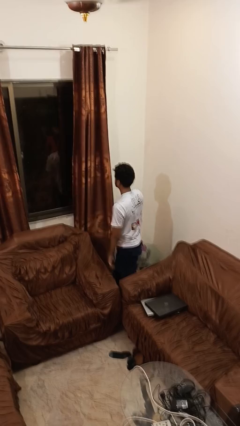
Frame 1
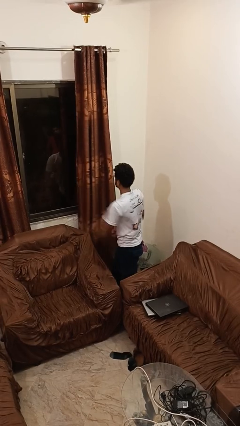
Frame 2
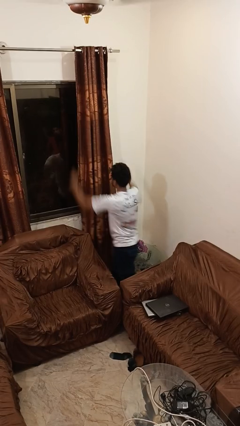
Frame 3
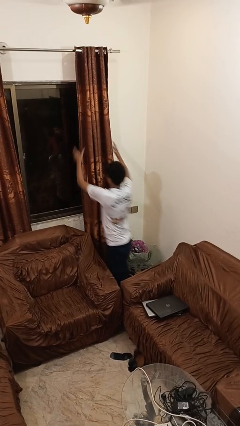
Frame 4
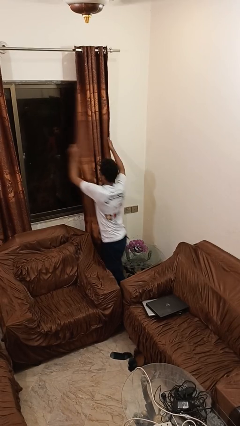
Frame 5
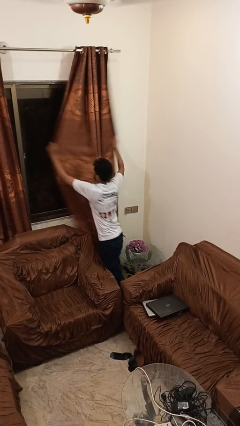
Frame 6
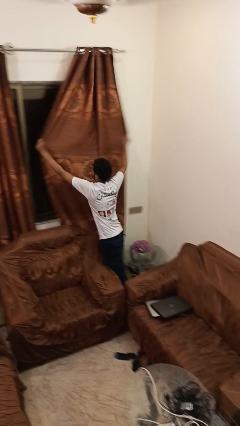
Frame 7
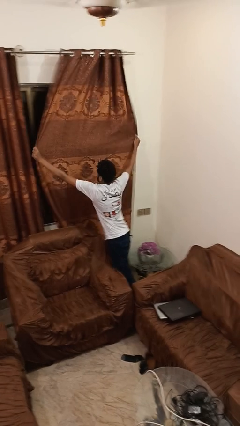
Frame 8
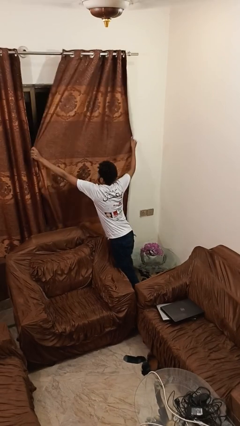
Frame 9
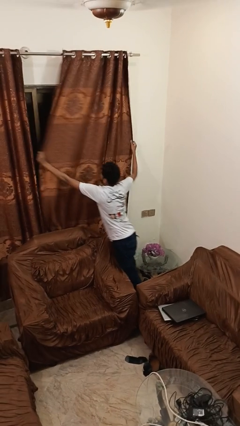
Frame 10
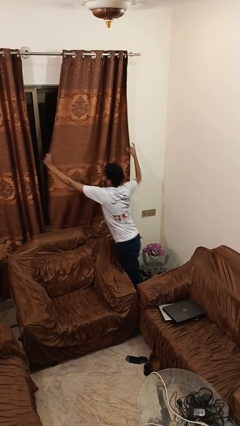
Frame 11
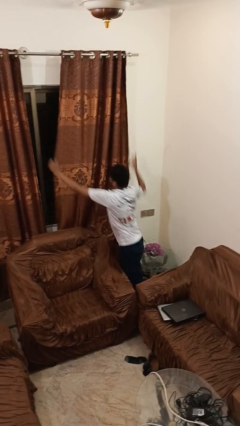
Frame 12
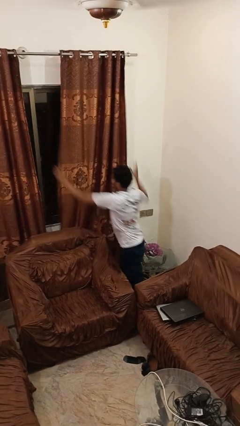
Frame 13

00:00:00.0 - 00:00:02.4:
person closes curtains

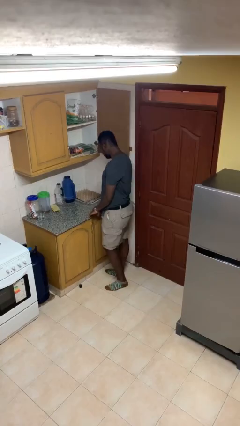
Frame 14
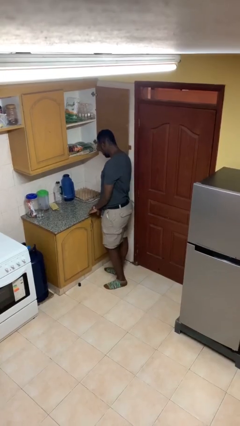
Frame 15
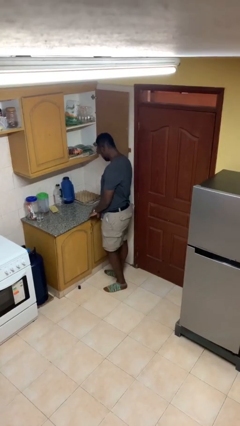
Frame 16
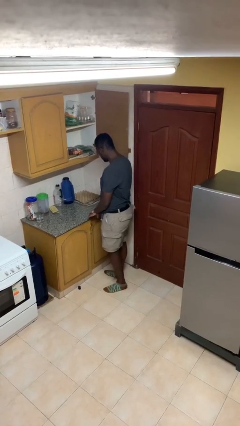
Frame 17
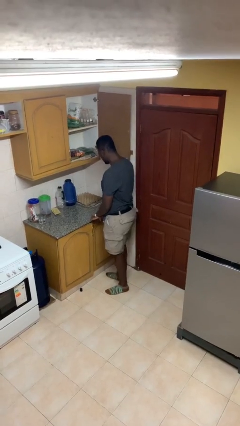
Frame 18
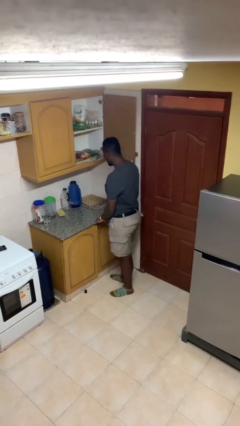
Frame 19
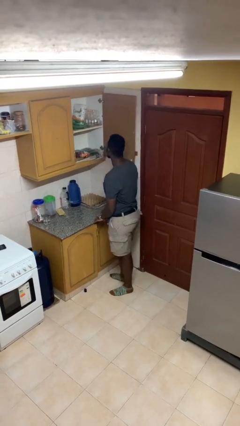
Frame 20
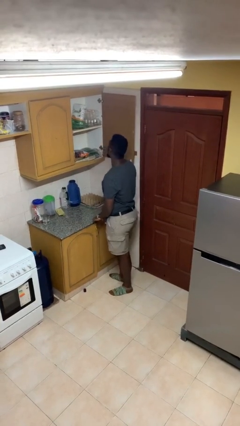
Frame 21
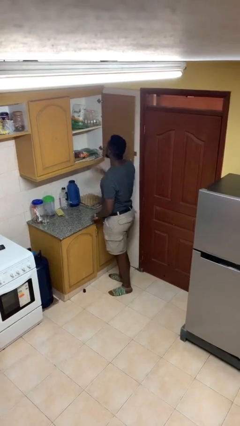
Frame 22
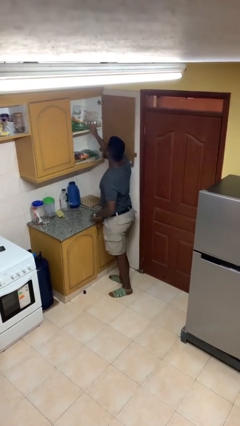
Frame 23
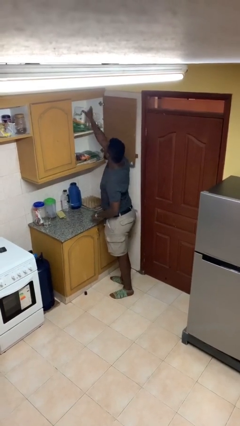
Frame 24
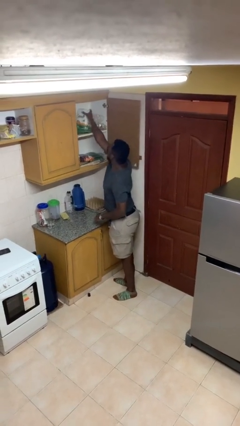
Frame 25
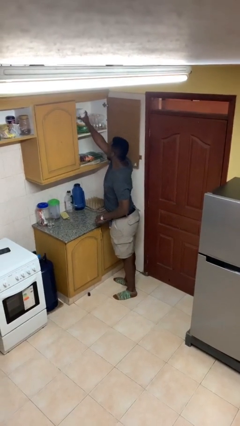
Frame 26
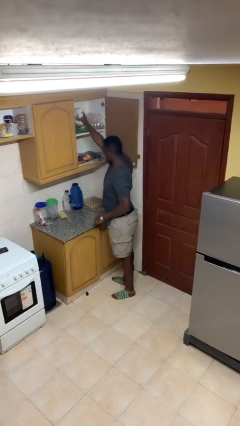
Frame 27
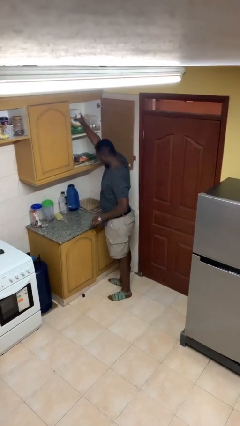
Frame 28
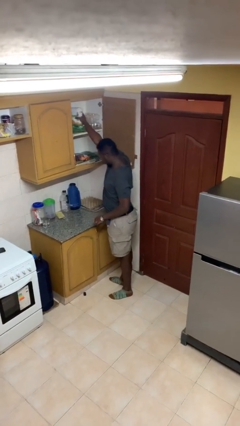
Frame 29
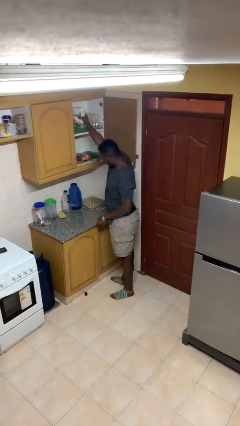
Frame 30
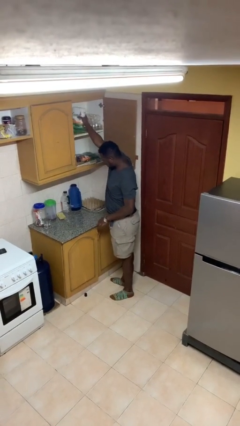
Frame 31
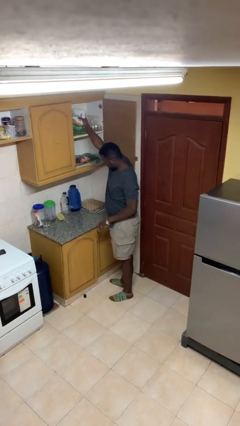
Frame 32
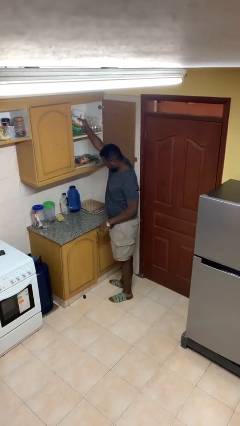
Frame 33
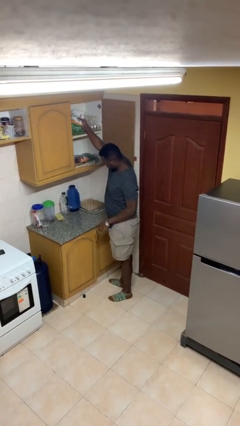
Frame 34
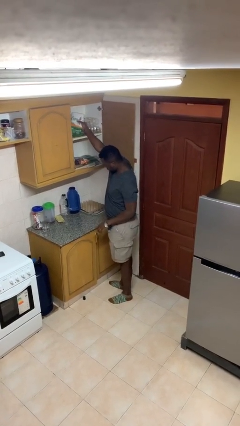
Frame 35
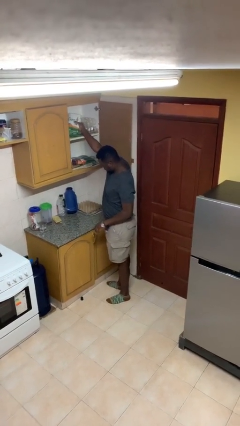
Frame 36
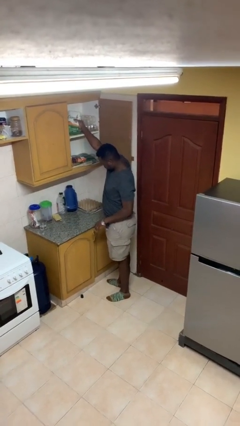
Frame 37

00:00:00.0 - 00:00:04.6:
person picks up object from shelf

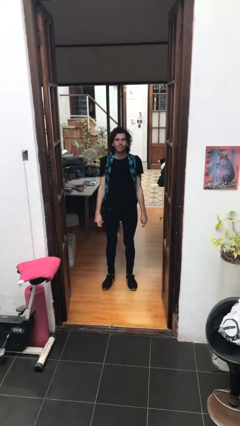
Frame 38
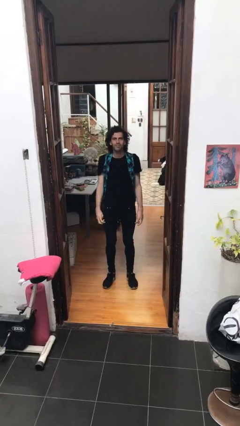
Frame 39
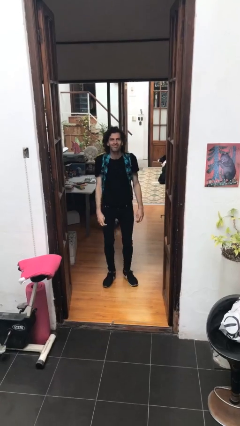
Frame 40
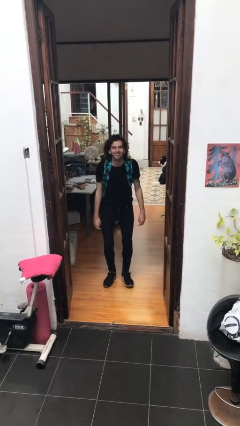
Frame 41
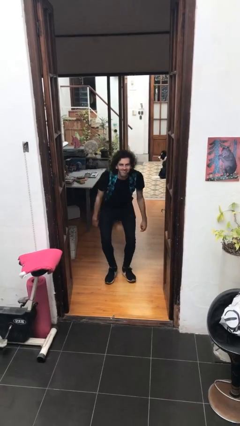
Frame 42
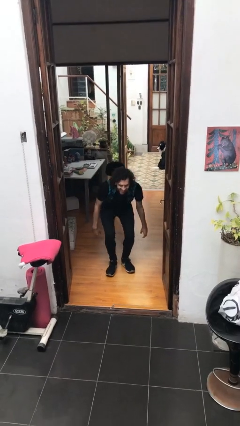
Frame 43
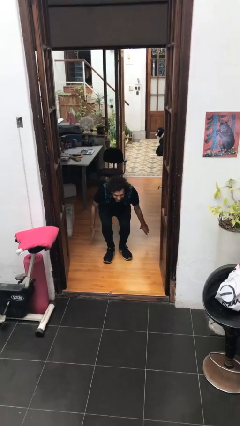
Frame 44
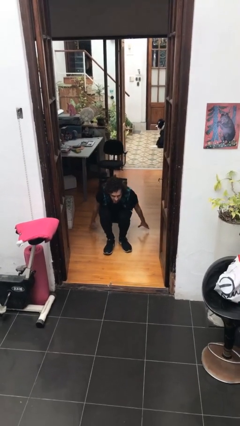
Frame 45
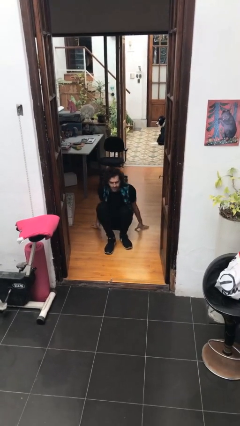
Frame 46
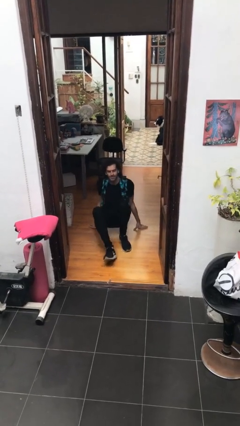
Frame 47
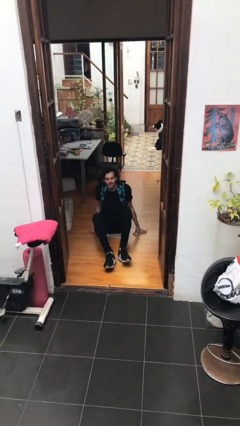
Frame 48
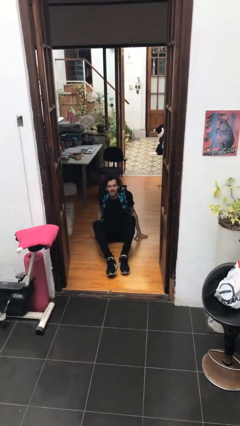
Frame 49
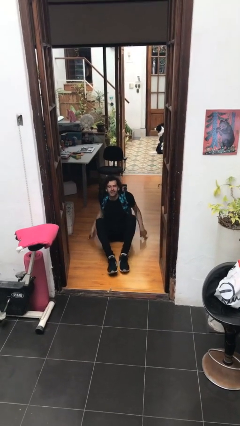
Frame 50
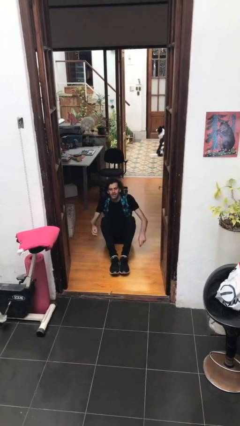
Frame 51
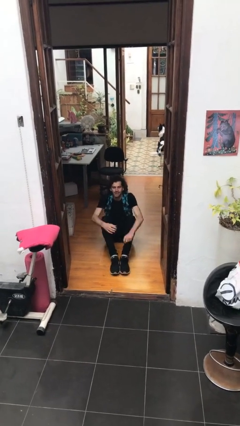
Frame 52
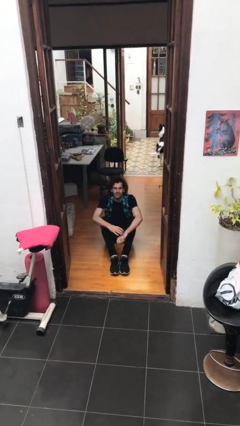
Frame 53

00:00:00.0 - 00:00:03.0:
person sits down
